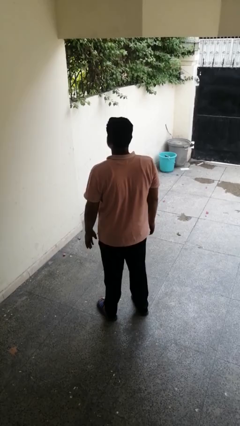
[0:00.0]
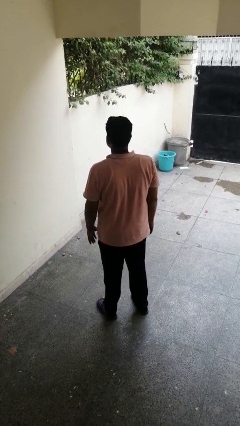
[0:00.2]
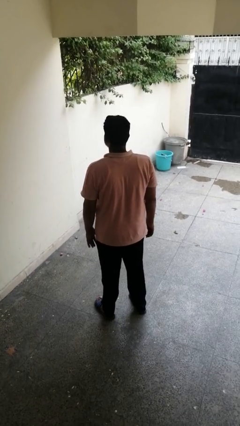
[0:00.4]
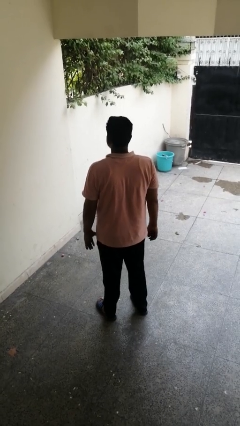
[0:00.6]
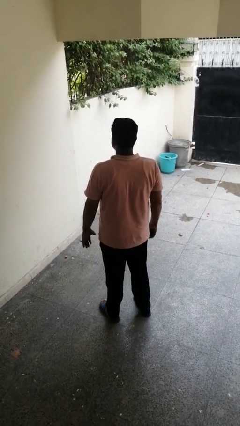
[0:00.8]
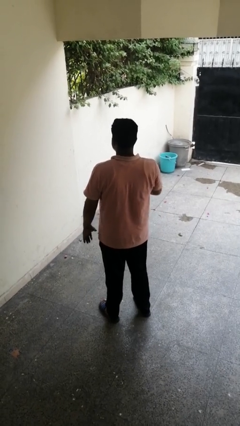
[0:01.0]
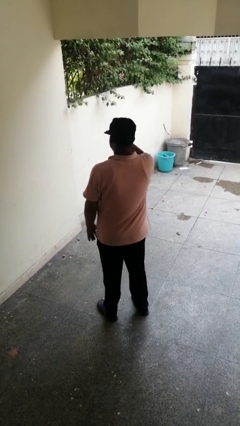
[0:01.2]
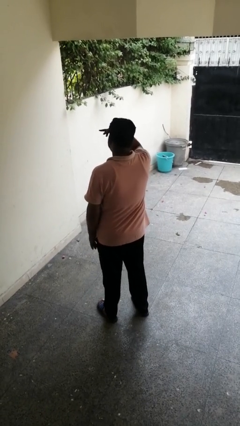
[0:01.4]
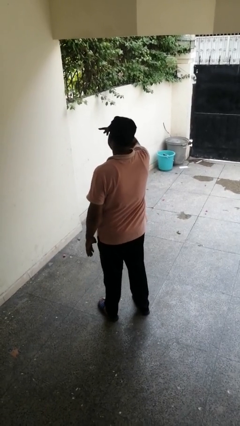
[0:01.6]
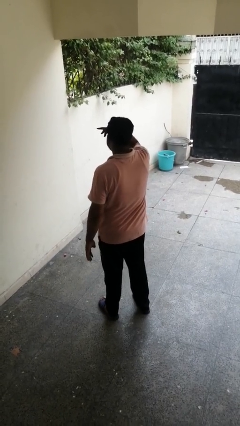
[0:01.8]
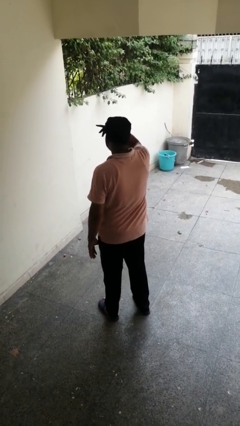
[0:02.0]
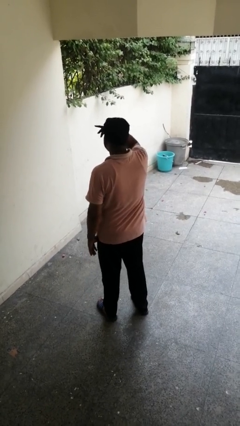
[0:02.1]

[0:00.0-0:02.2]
person shades eyes

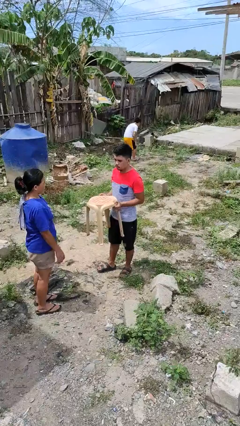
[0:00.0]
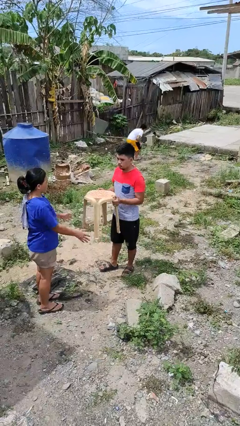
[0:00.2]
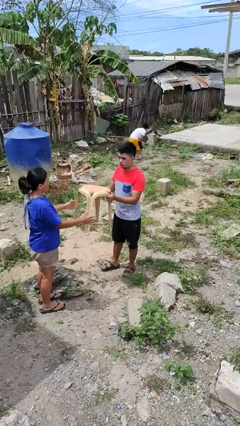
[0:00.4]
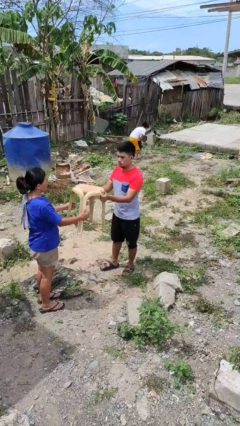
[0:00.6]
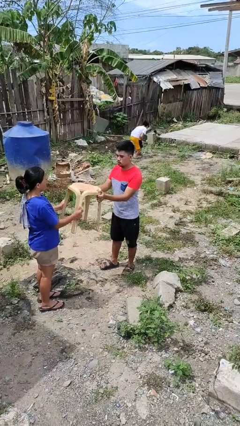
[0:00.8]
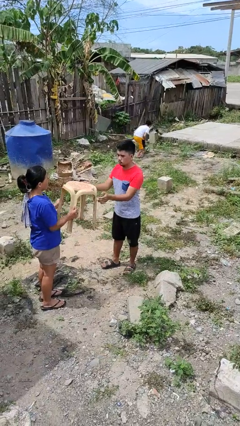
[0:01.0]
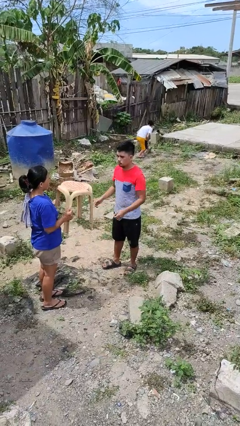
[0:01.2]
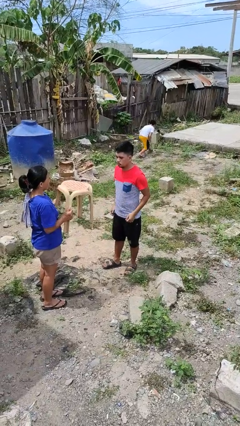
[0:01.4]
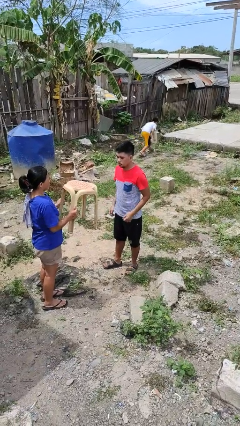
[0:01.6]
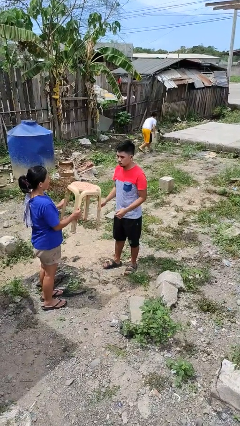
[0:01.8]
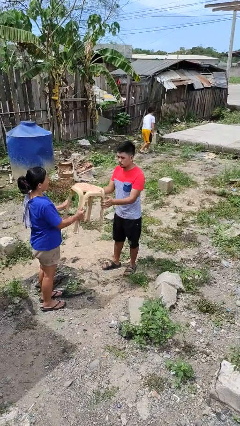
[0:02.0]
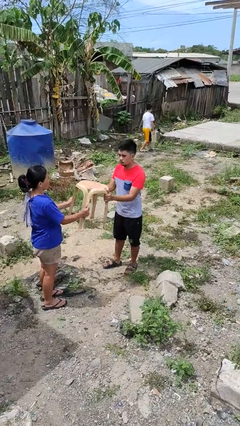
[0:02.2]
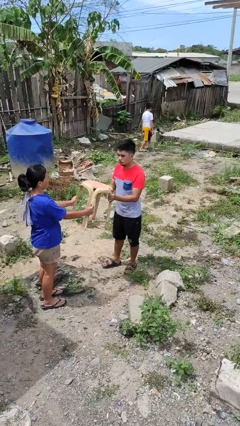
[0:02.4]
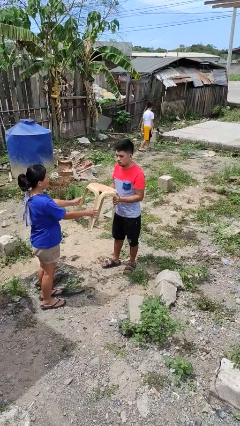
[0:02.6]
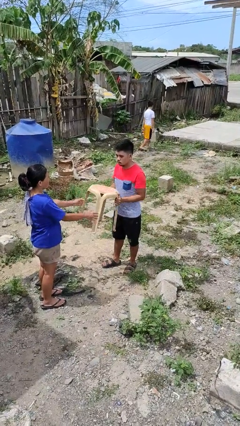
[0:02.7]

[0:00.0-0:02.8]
person transfers object to person

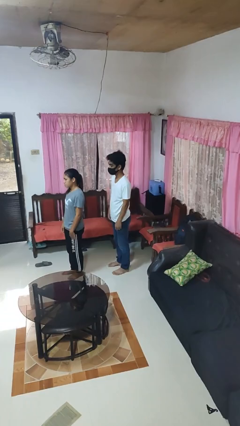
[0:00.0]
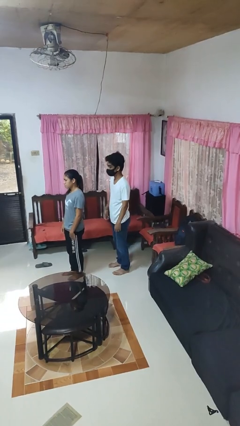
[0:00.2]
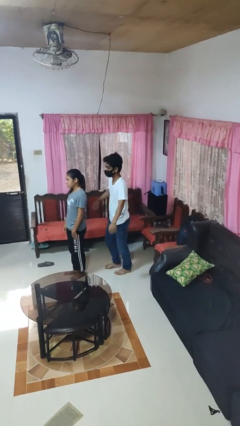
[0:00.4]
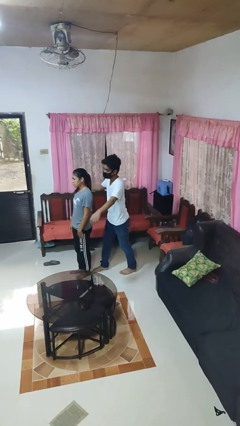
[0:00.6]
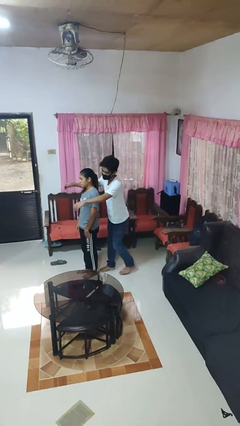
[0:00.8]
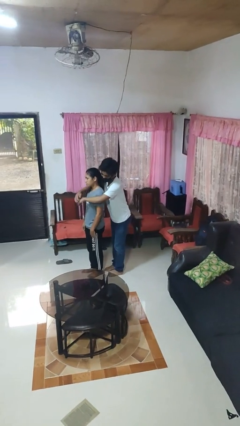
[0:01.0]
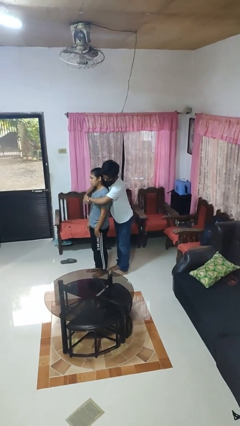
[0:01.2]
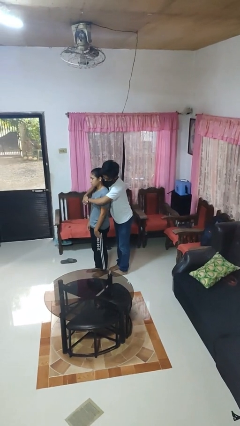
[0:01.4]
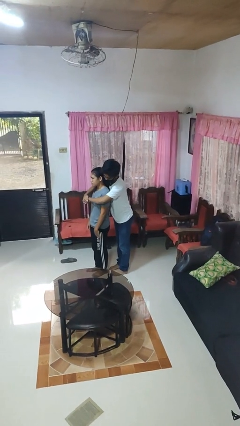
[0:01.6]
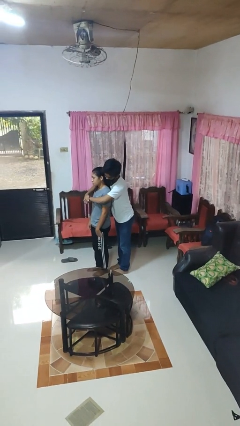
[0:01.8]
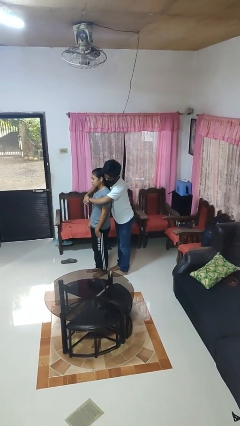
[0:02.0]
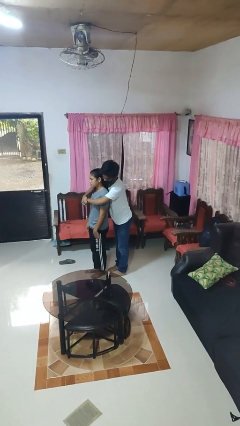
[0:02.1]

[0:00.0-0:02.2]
person hugs person from behind

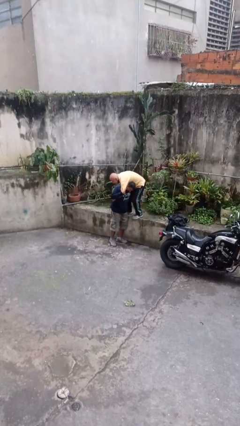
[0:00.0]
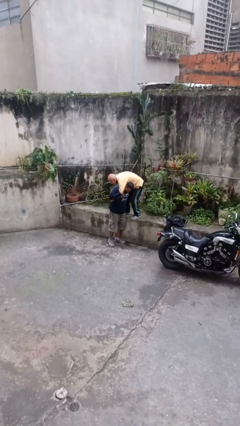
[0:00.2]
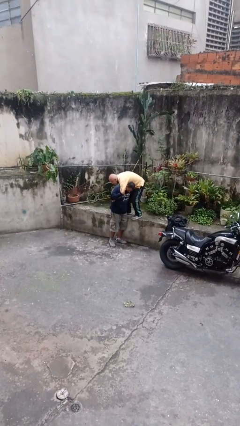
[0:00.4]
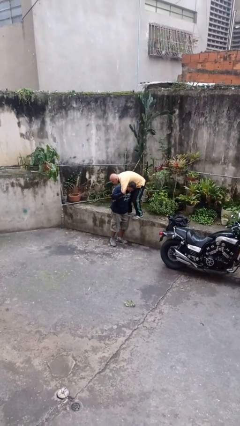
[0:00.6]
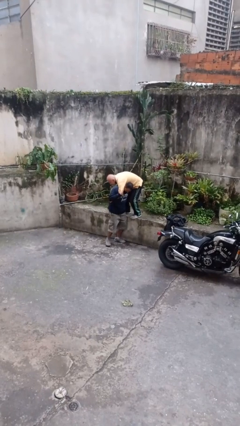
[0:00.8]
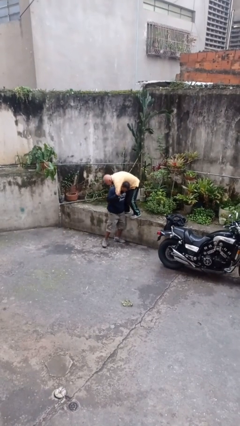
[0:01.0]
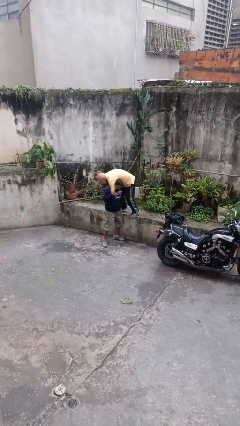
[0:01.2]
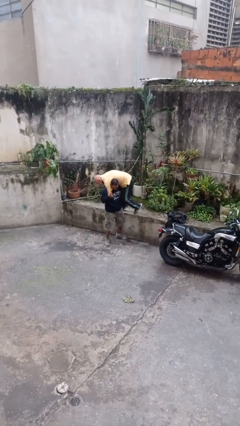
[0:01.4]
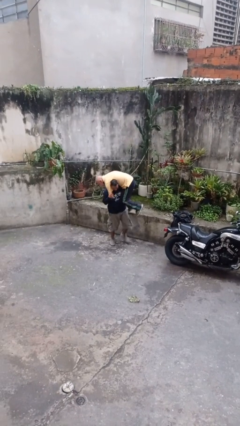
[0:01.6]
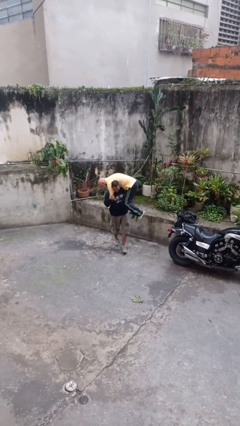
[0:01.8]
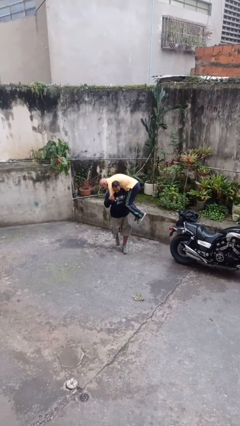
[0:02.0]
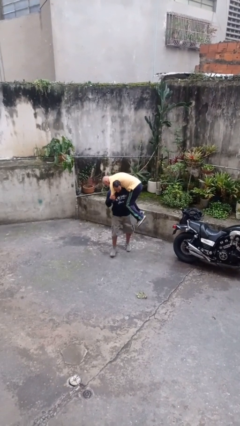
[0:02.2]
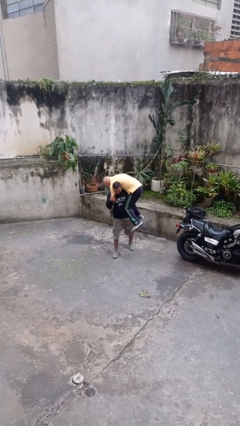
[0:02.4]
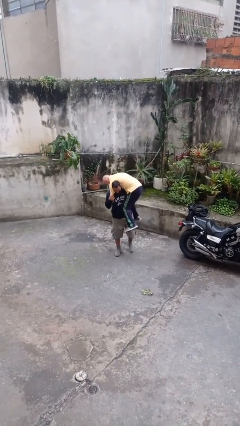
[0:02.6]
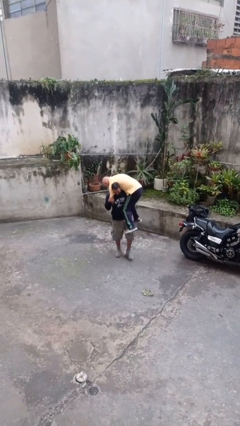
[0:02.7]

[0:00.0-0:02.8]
person carries person over shoulder

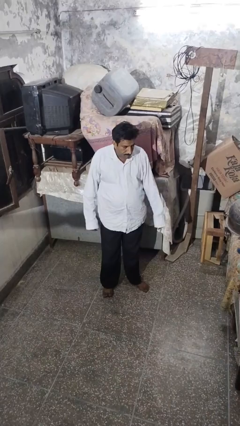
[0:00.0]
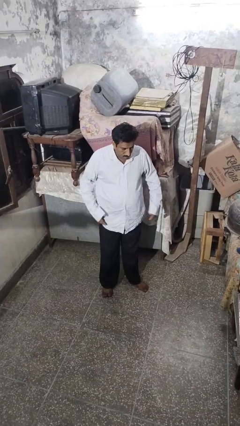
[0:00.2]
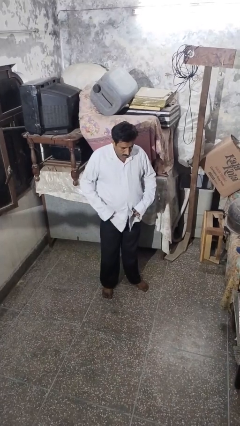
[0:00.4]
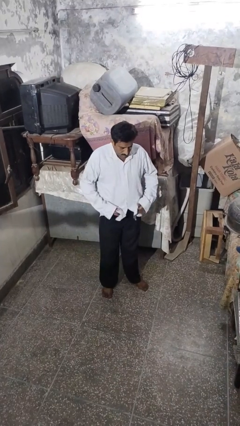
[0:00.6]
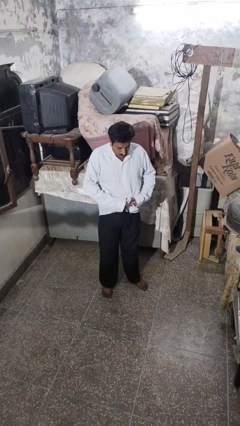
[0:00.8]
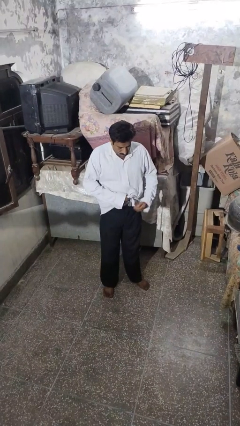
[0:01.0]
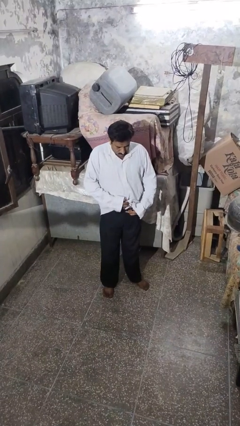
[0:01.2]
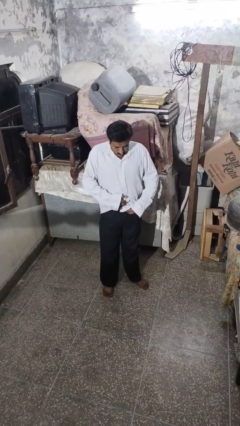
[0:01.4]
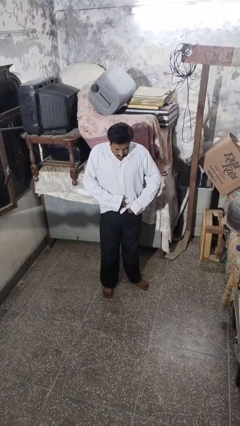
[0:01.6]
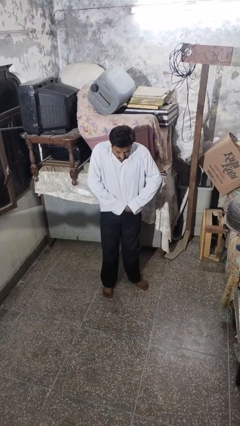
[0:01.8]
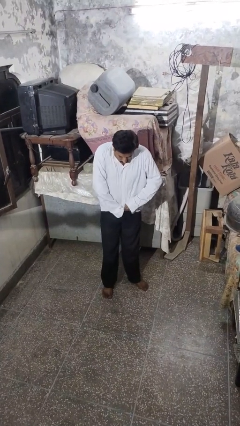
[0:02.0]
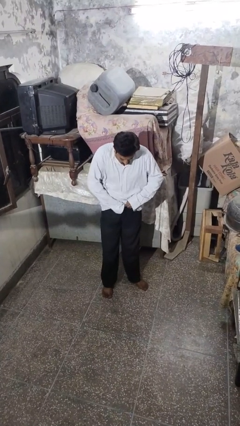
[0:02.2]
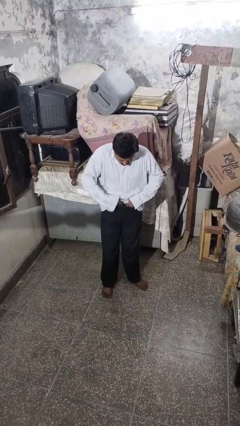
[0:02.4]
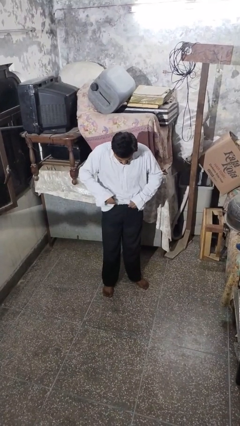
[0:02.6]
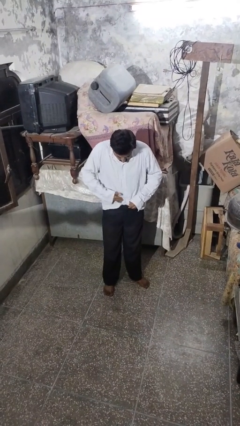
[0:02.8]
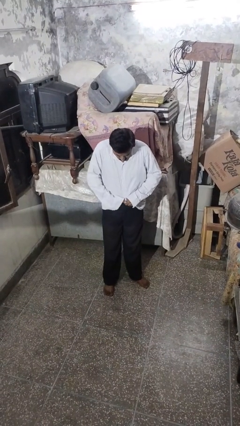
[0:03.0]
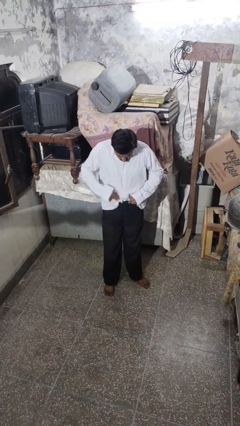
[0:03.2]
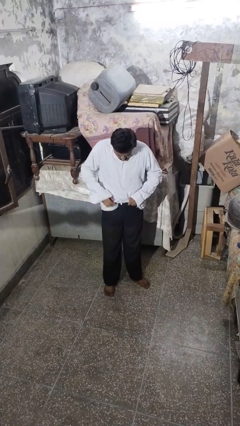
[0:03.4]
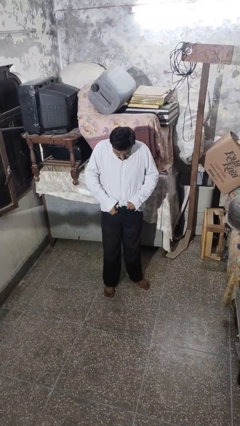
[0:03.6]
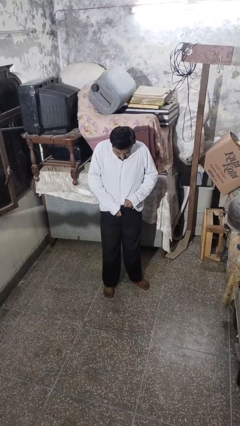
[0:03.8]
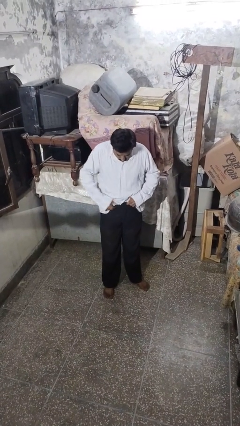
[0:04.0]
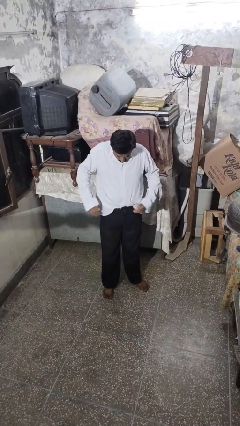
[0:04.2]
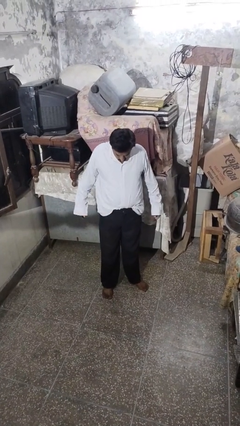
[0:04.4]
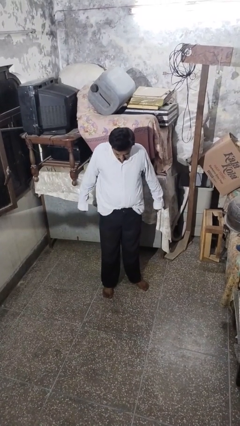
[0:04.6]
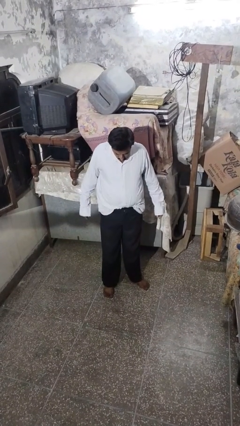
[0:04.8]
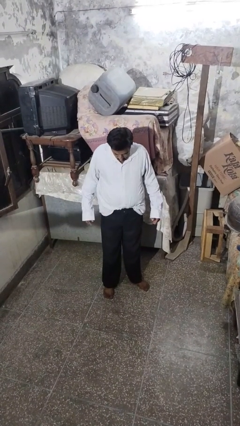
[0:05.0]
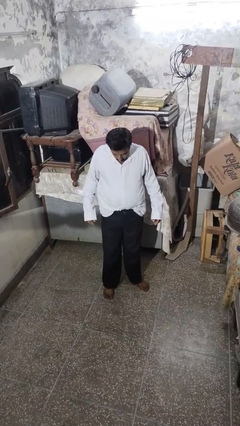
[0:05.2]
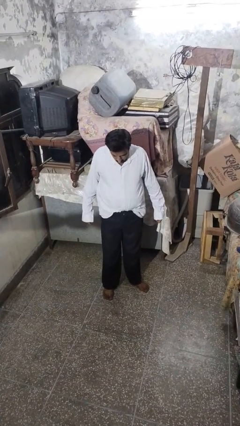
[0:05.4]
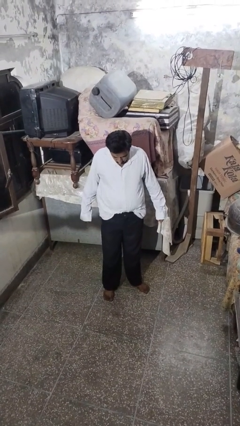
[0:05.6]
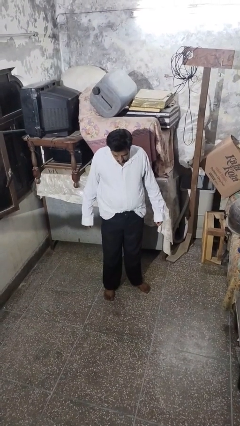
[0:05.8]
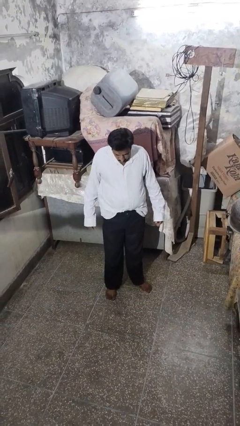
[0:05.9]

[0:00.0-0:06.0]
person tucks in shirt

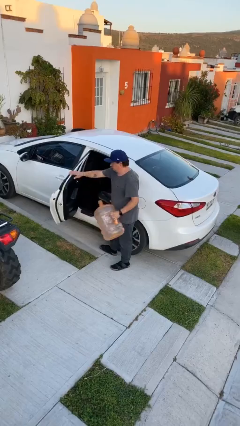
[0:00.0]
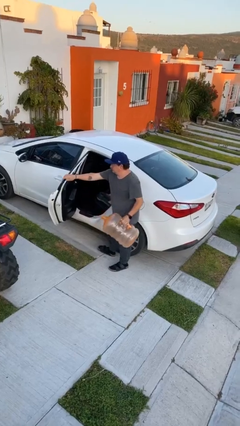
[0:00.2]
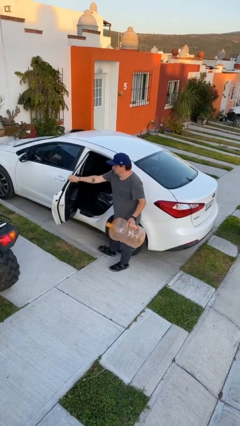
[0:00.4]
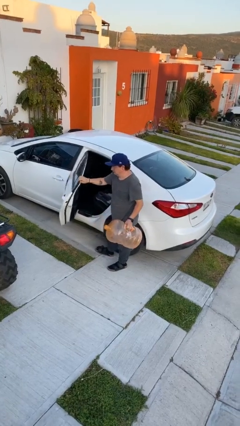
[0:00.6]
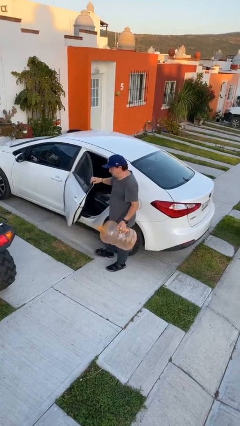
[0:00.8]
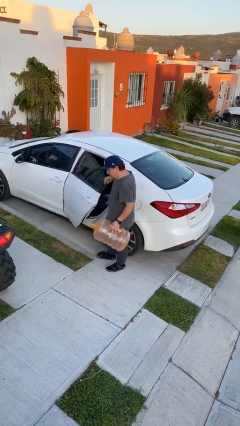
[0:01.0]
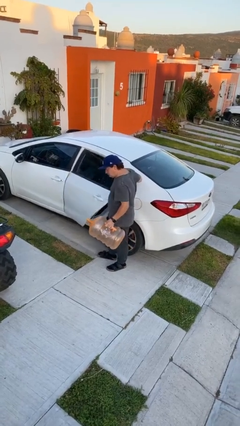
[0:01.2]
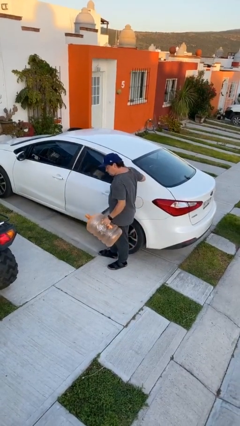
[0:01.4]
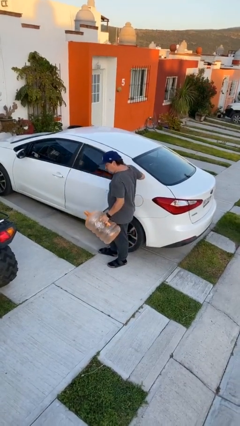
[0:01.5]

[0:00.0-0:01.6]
person closes car door
